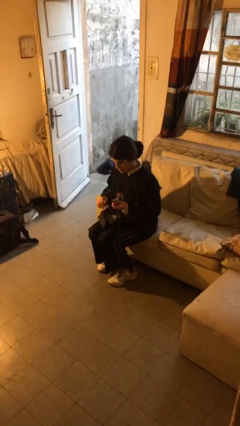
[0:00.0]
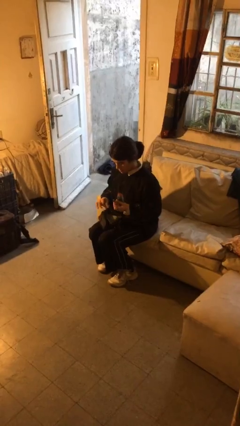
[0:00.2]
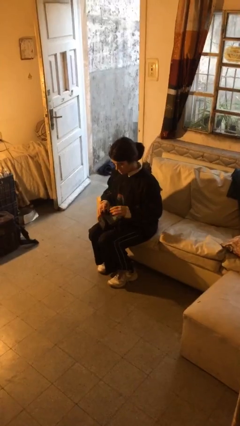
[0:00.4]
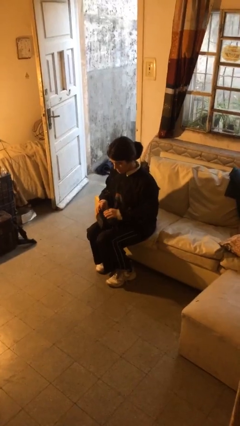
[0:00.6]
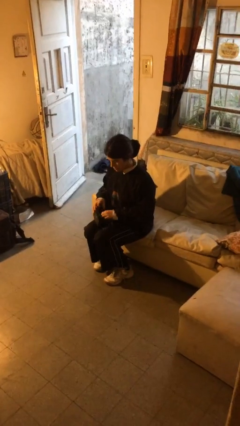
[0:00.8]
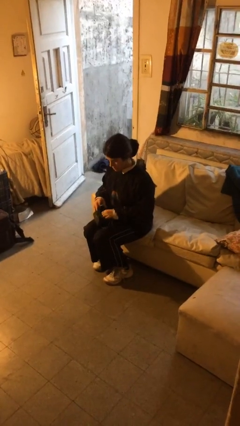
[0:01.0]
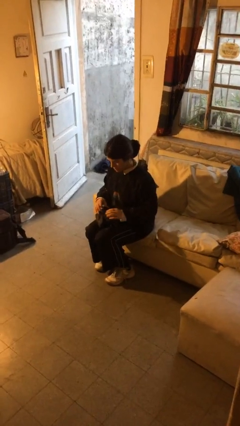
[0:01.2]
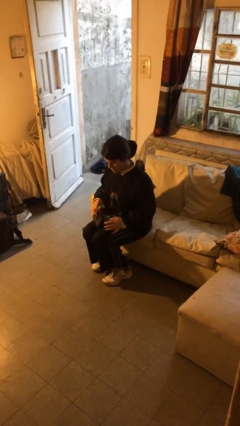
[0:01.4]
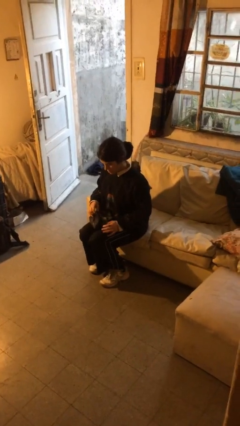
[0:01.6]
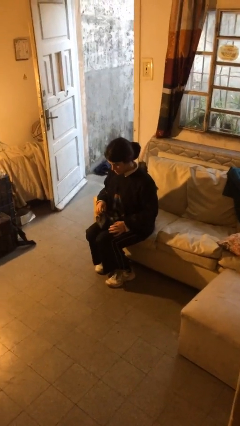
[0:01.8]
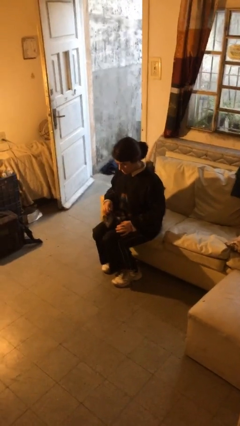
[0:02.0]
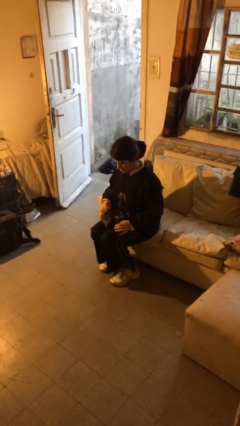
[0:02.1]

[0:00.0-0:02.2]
person puts object into purse

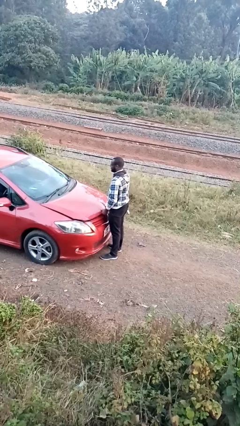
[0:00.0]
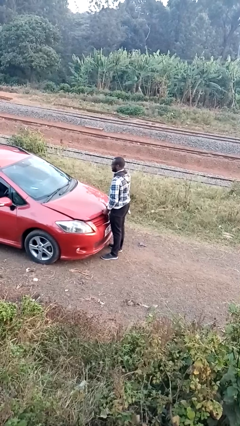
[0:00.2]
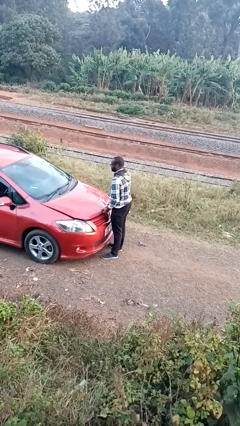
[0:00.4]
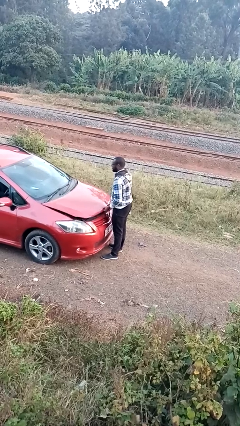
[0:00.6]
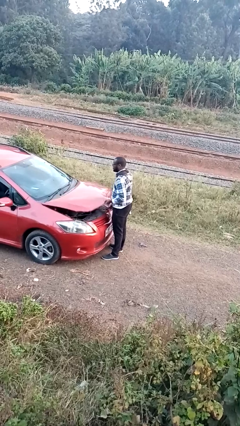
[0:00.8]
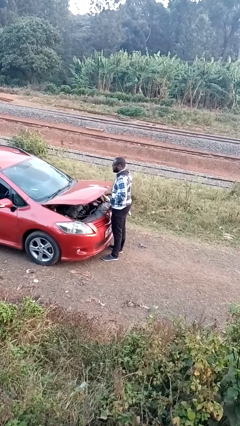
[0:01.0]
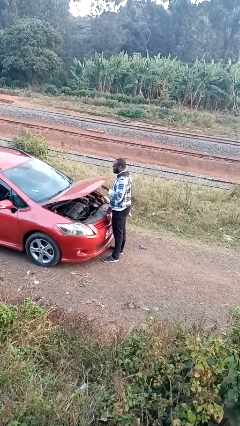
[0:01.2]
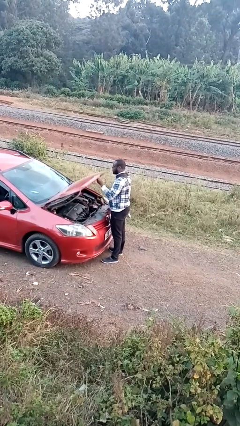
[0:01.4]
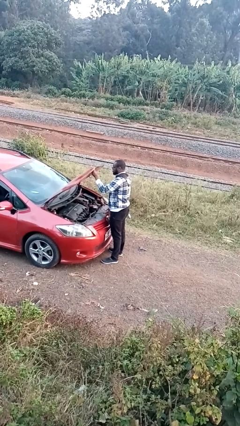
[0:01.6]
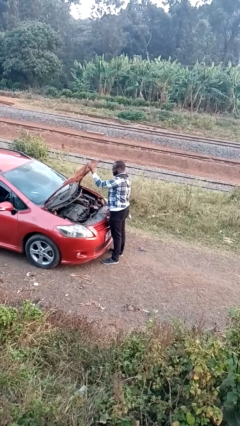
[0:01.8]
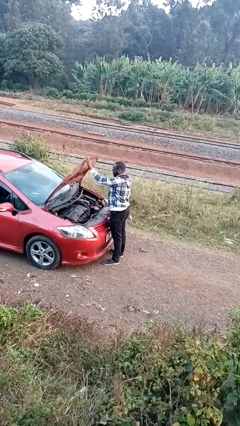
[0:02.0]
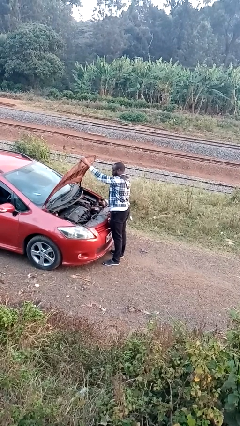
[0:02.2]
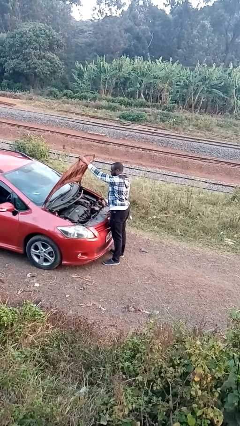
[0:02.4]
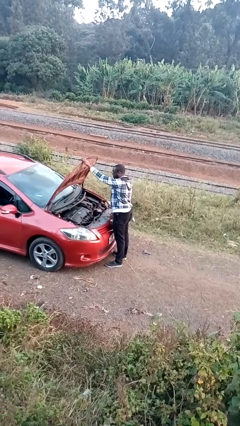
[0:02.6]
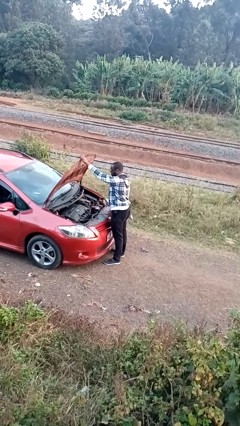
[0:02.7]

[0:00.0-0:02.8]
person opens car hood

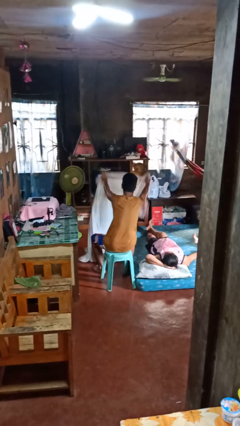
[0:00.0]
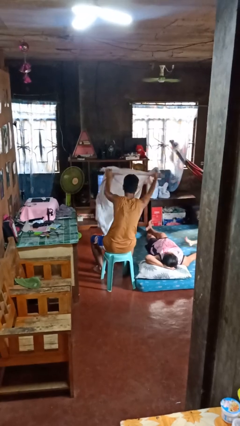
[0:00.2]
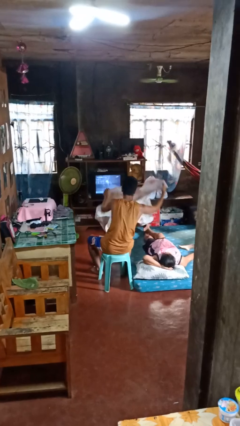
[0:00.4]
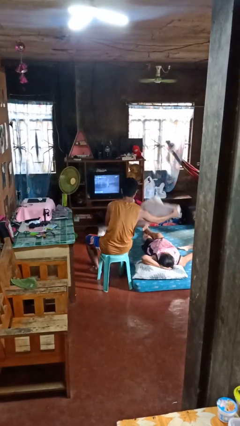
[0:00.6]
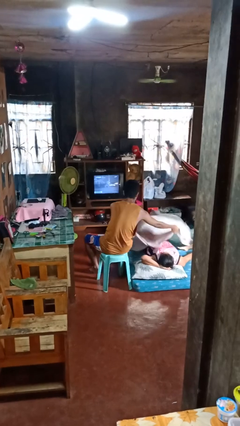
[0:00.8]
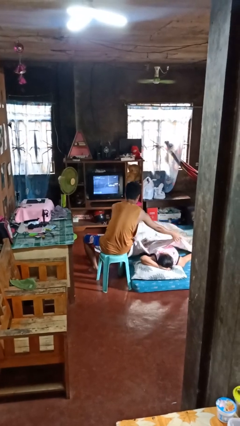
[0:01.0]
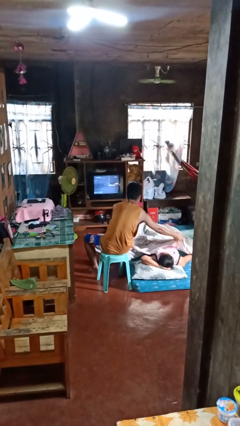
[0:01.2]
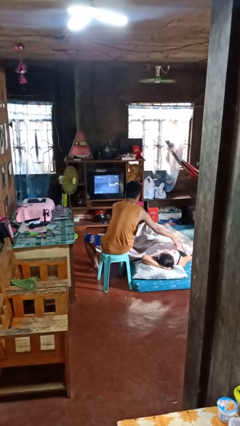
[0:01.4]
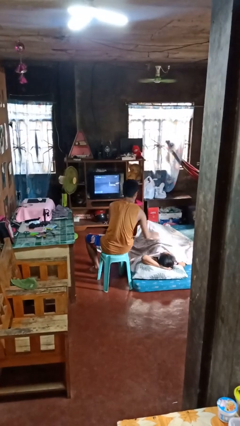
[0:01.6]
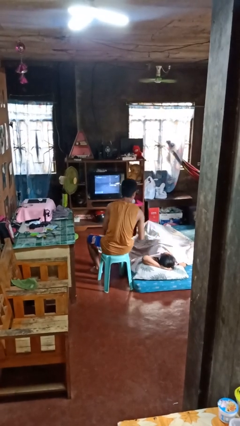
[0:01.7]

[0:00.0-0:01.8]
person covers friend with blanket

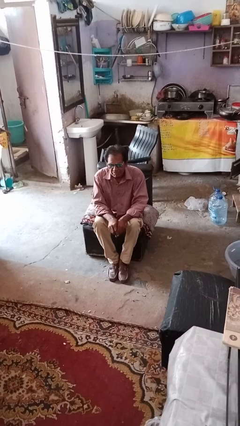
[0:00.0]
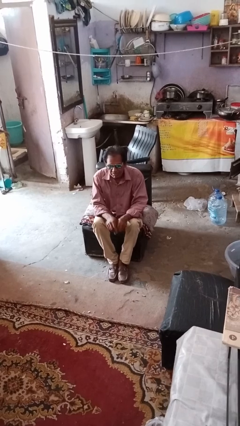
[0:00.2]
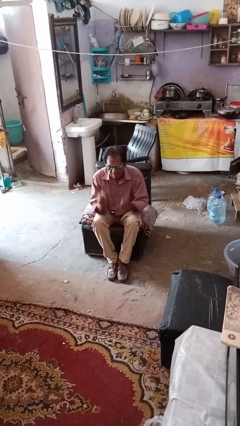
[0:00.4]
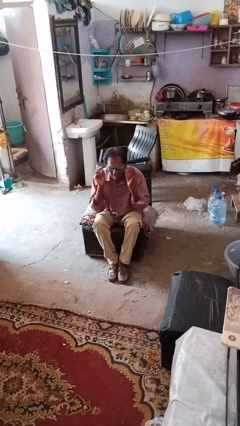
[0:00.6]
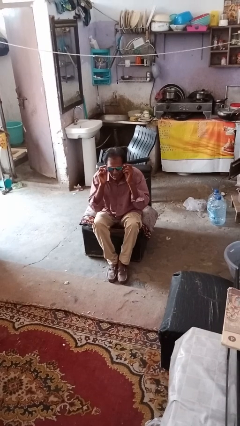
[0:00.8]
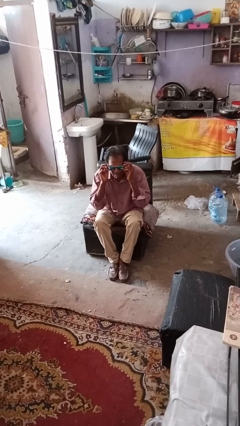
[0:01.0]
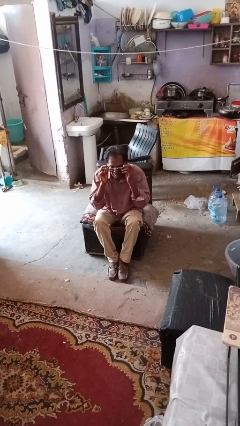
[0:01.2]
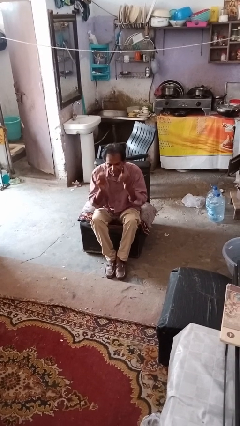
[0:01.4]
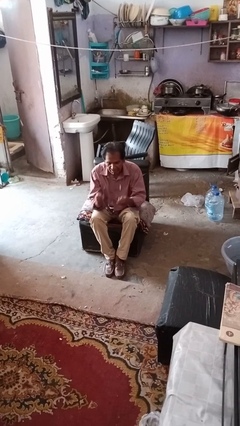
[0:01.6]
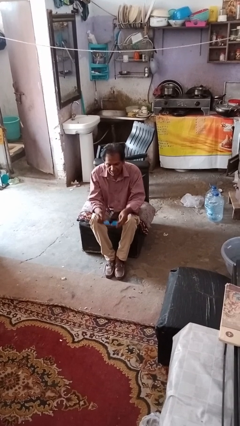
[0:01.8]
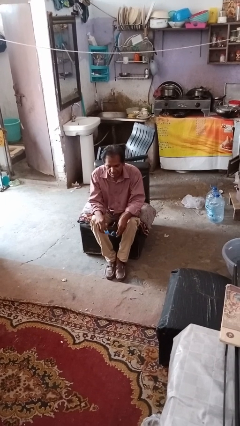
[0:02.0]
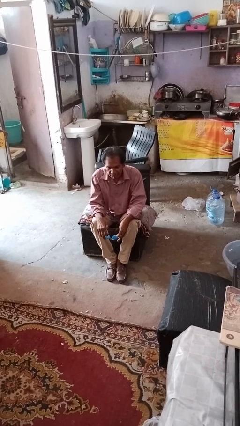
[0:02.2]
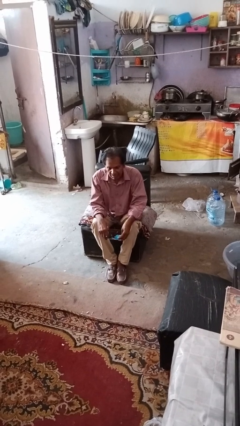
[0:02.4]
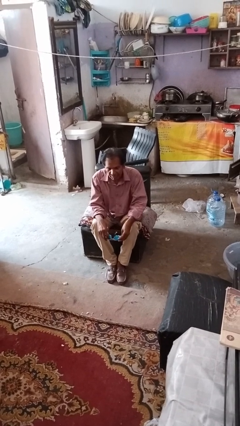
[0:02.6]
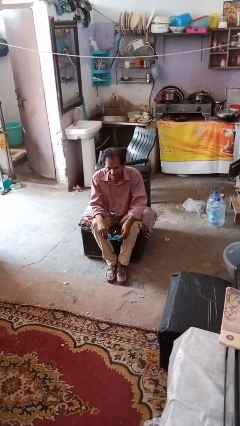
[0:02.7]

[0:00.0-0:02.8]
person takes off sunglasses

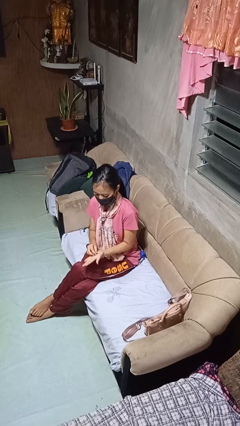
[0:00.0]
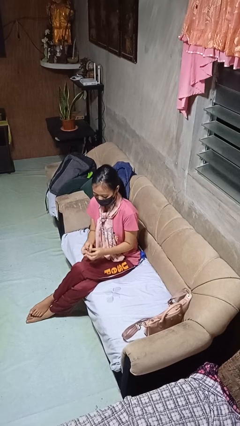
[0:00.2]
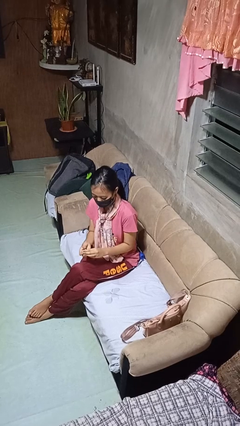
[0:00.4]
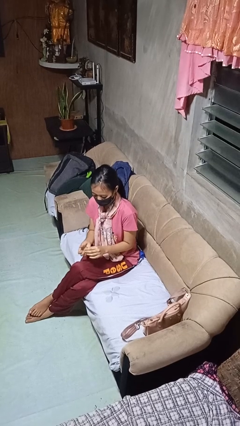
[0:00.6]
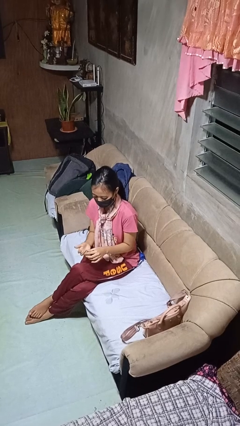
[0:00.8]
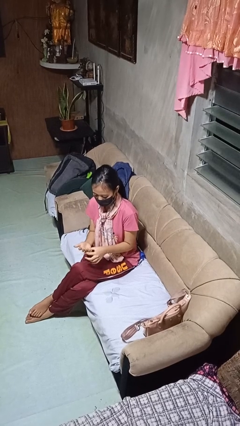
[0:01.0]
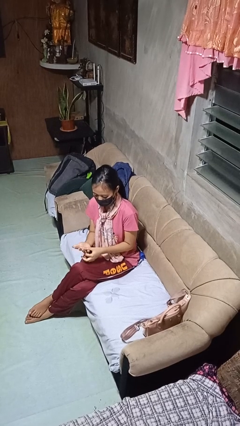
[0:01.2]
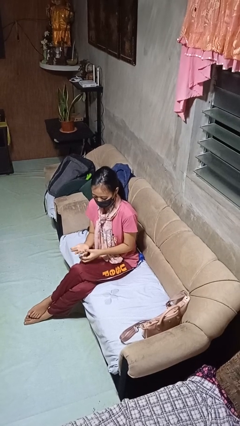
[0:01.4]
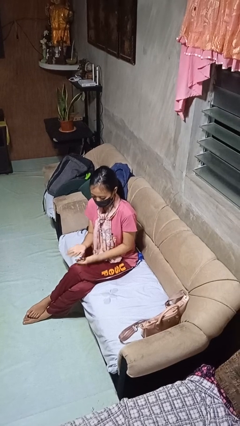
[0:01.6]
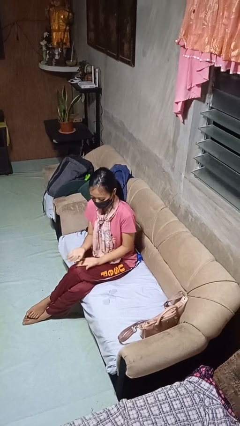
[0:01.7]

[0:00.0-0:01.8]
person puts on ring

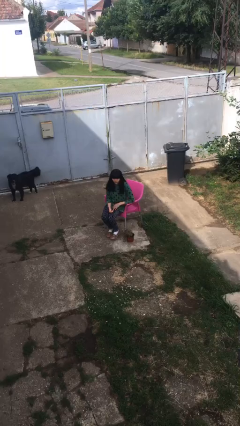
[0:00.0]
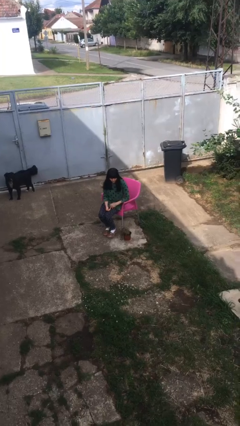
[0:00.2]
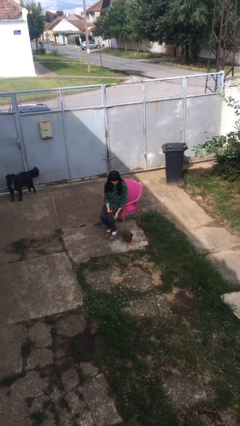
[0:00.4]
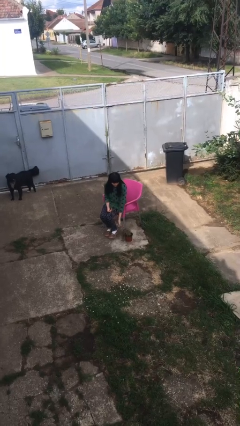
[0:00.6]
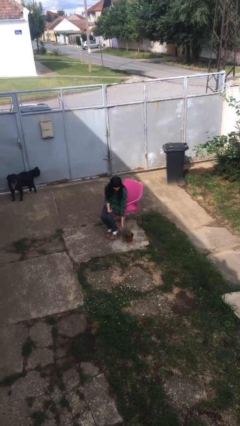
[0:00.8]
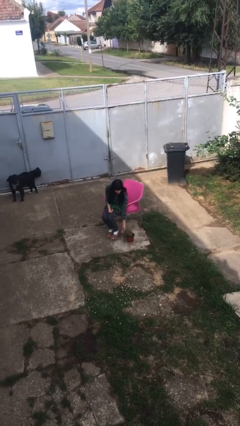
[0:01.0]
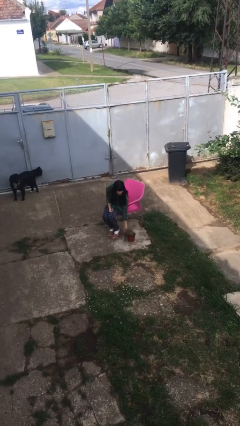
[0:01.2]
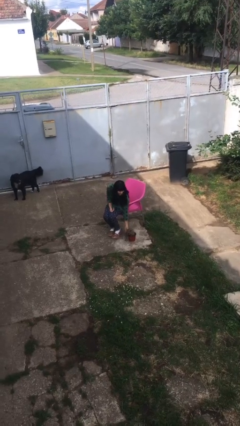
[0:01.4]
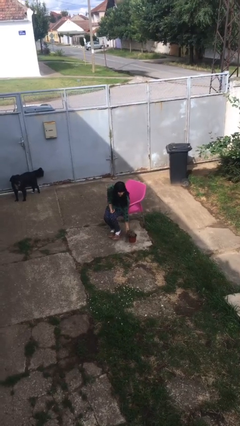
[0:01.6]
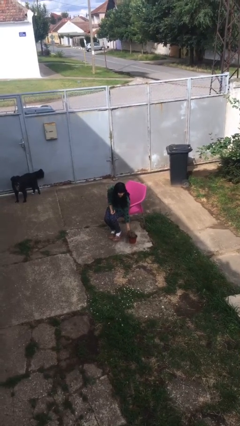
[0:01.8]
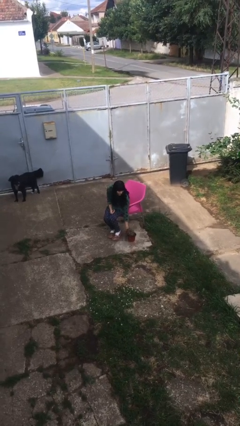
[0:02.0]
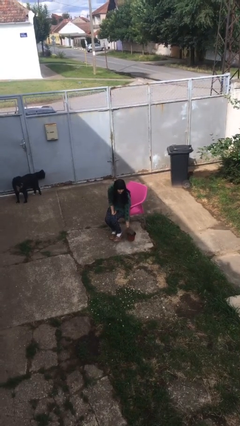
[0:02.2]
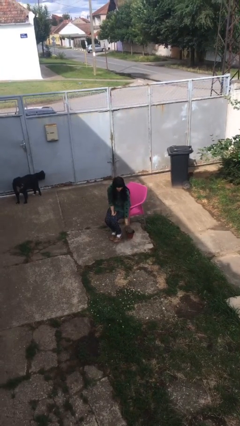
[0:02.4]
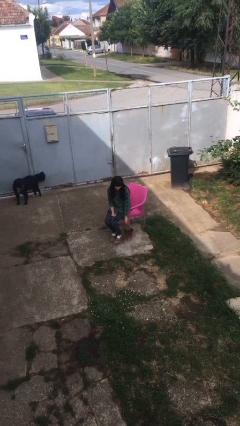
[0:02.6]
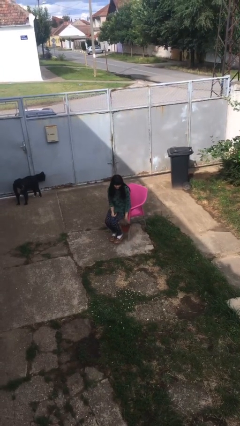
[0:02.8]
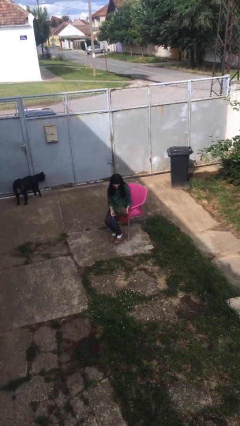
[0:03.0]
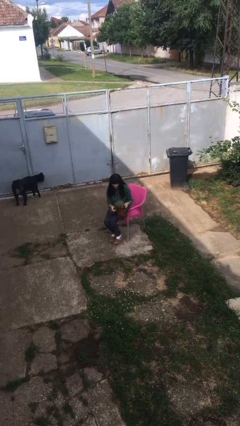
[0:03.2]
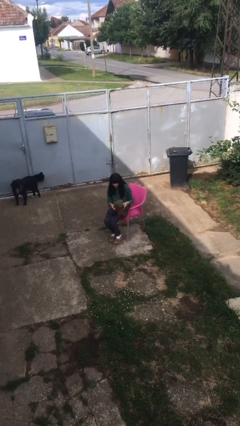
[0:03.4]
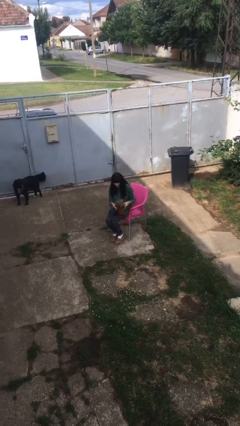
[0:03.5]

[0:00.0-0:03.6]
person picks up object from floor

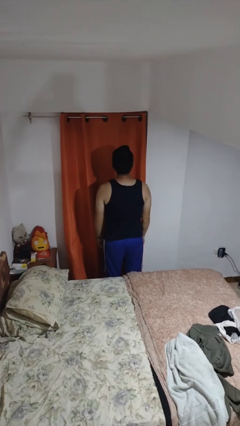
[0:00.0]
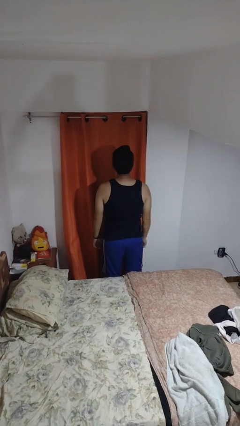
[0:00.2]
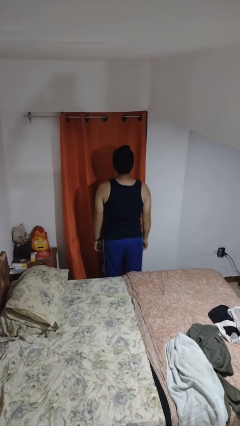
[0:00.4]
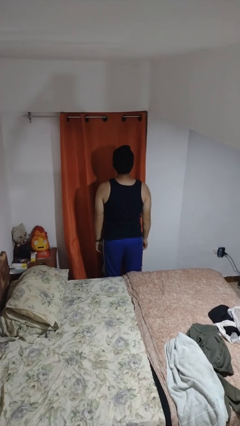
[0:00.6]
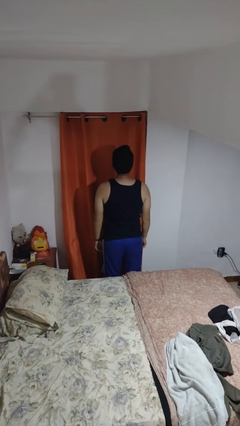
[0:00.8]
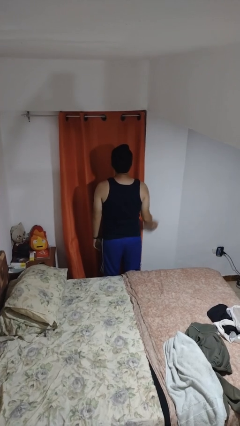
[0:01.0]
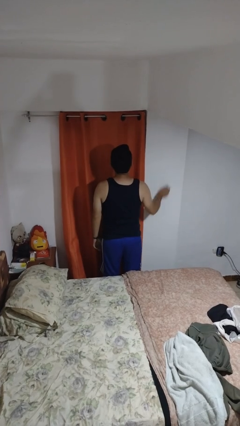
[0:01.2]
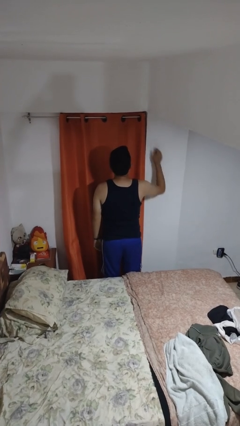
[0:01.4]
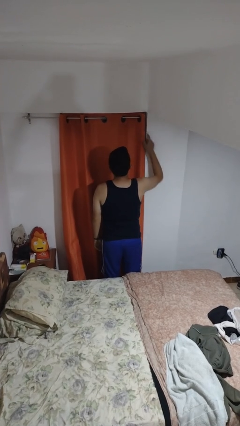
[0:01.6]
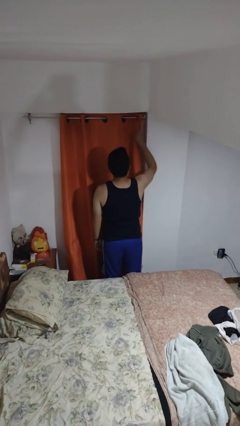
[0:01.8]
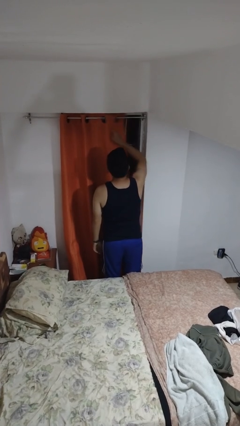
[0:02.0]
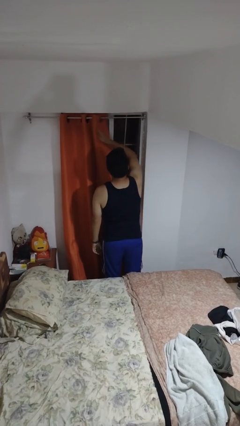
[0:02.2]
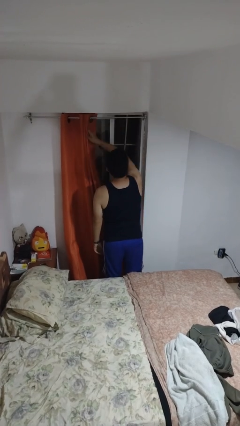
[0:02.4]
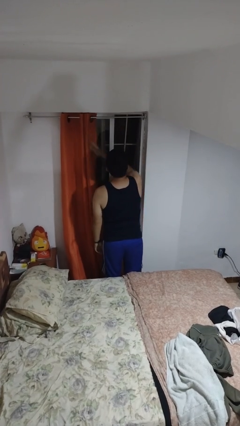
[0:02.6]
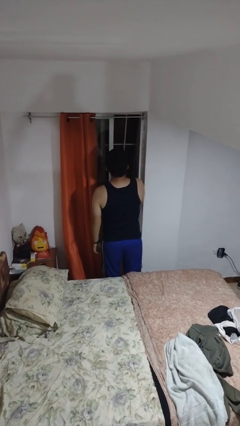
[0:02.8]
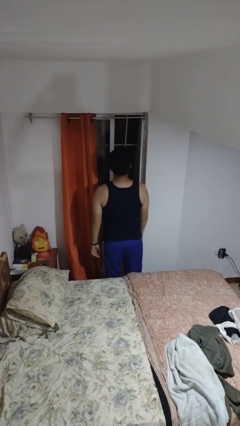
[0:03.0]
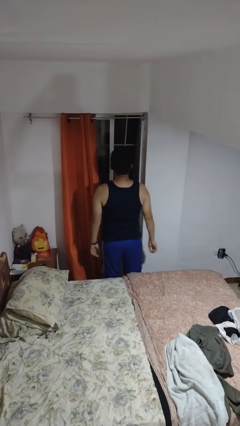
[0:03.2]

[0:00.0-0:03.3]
person opens curtains
